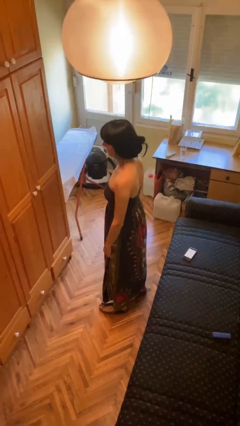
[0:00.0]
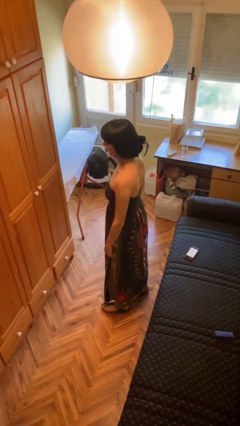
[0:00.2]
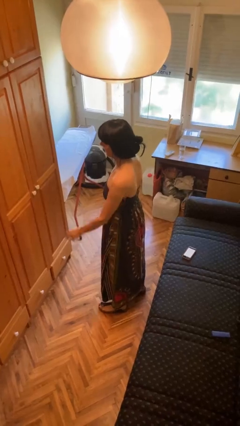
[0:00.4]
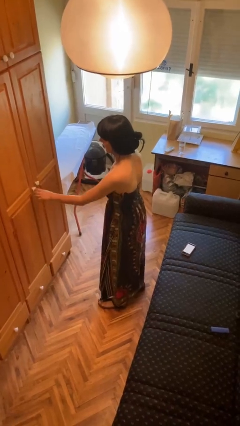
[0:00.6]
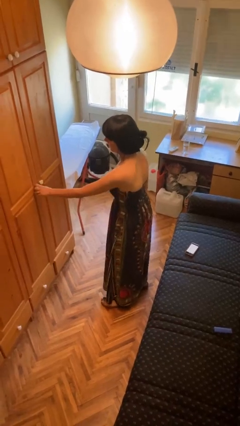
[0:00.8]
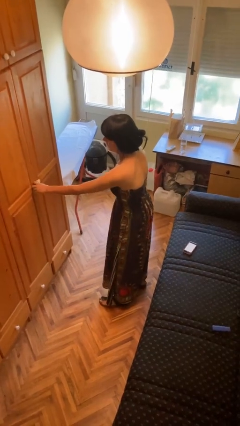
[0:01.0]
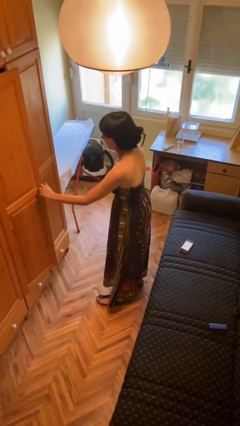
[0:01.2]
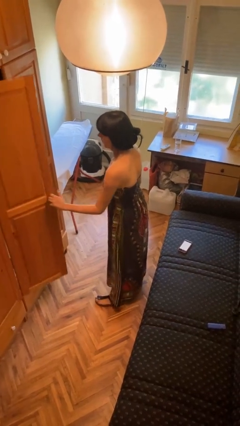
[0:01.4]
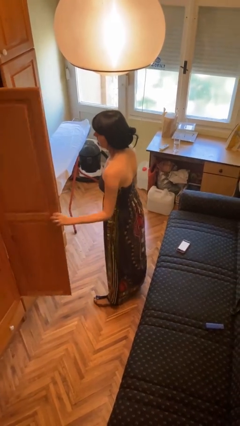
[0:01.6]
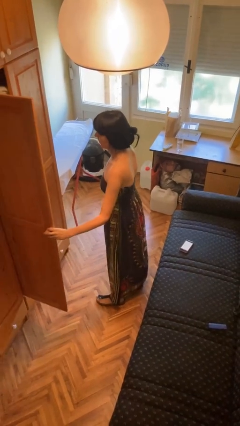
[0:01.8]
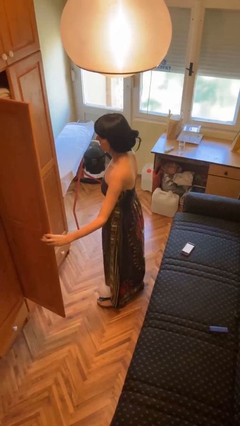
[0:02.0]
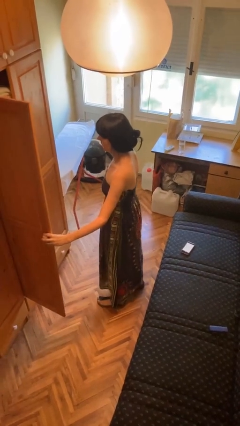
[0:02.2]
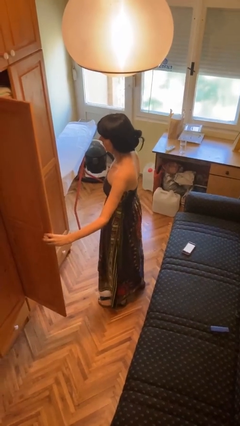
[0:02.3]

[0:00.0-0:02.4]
person opens closet door

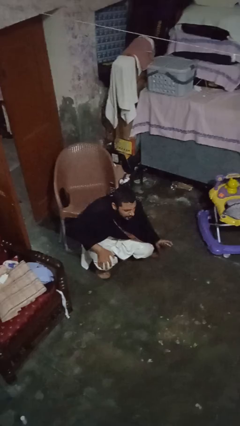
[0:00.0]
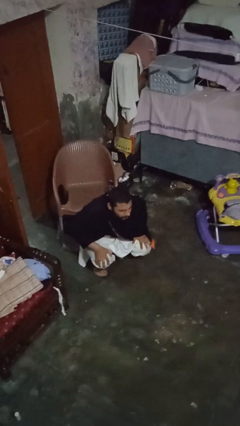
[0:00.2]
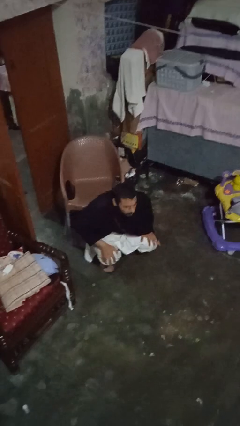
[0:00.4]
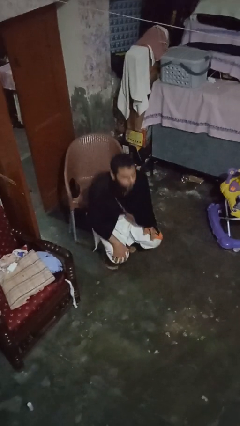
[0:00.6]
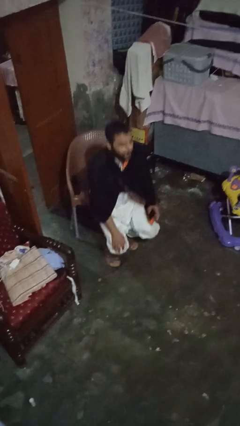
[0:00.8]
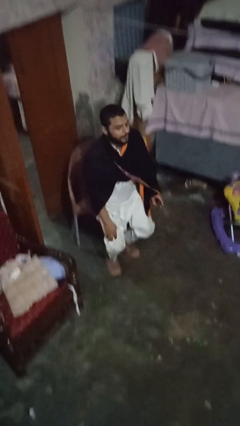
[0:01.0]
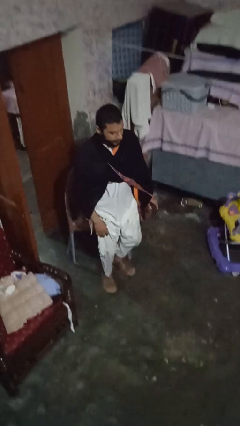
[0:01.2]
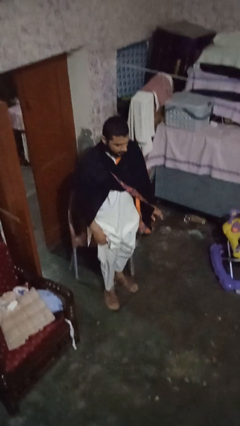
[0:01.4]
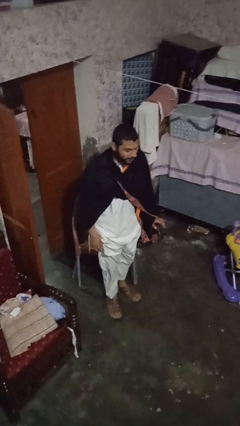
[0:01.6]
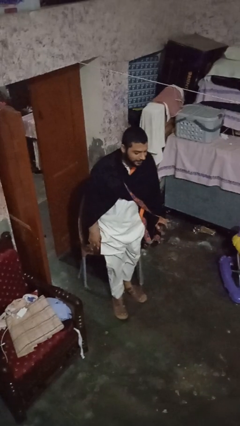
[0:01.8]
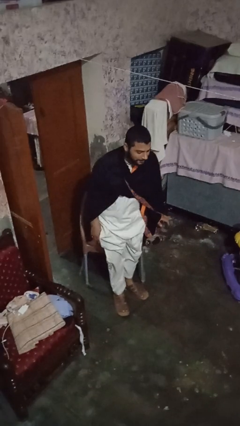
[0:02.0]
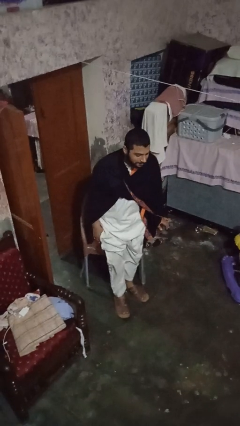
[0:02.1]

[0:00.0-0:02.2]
person stands up from floor

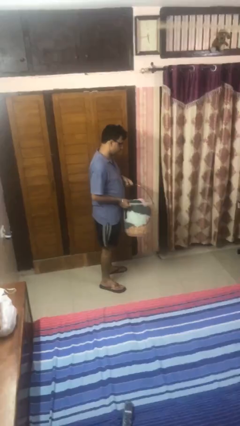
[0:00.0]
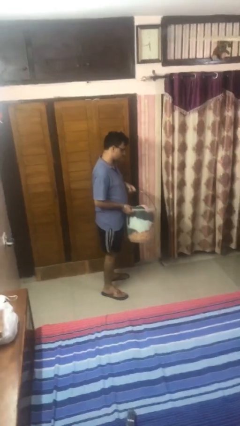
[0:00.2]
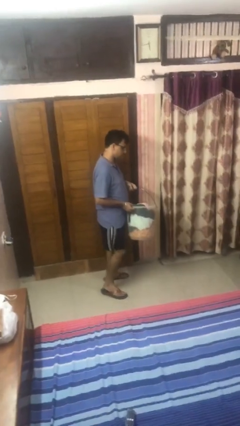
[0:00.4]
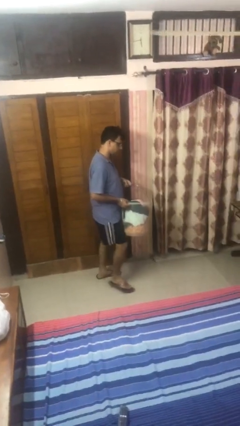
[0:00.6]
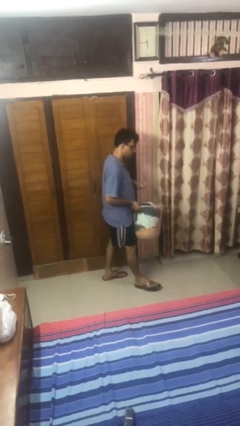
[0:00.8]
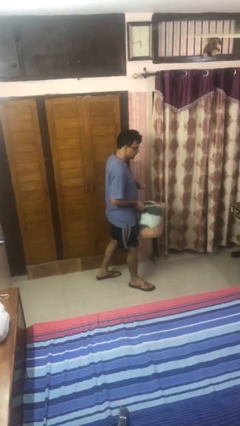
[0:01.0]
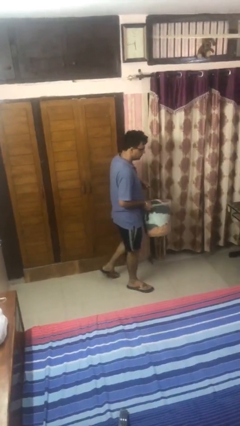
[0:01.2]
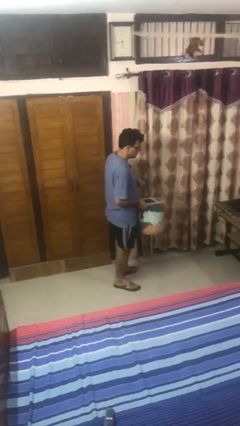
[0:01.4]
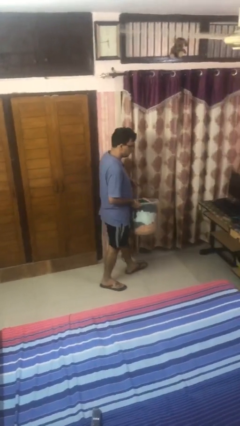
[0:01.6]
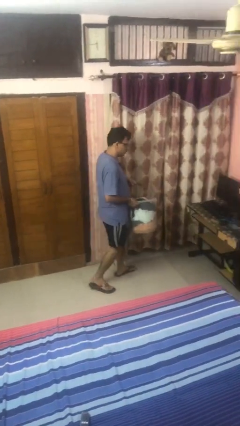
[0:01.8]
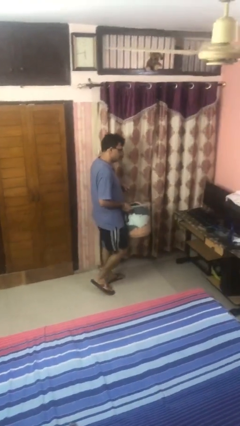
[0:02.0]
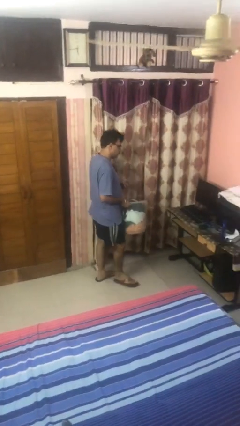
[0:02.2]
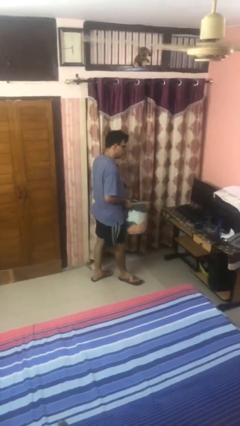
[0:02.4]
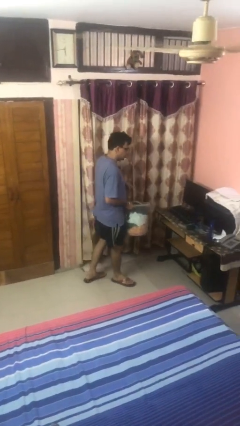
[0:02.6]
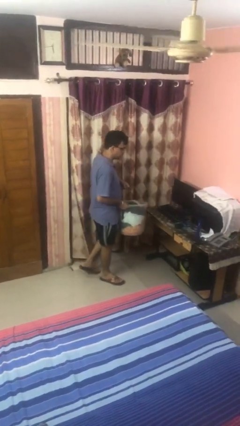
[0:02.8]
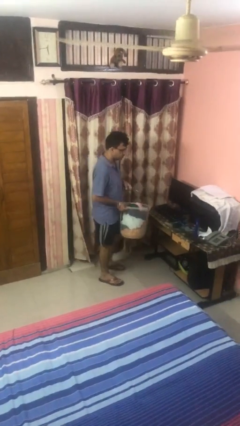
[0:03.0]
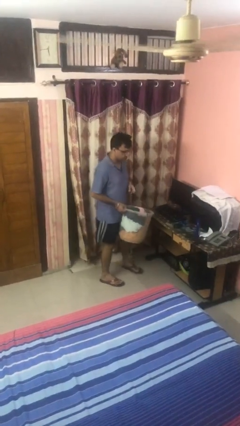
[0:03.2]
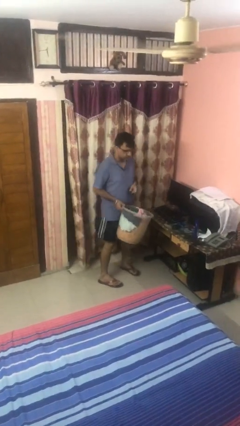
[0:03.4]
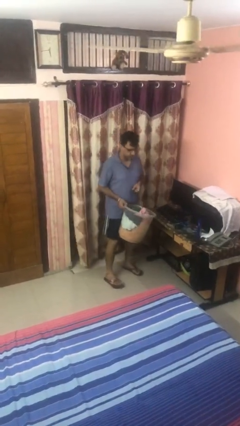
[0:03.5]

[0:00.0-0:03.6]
person carries laundry basket

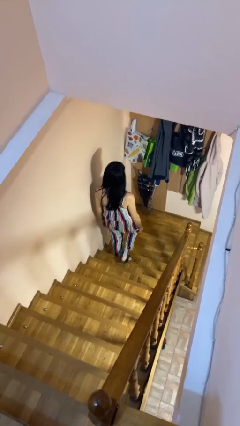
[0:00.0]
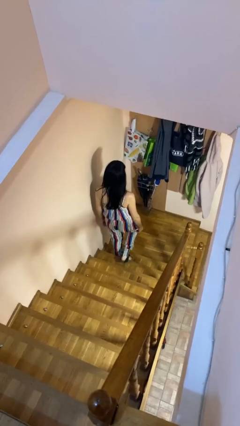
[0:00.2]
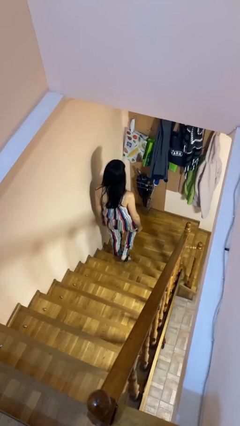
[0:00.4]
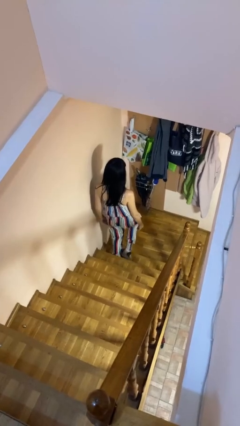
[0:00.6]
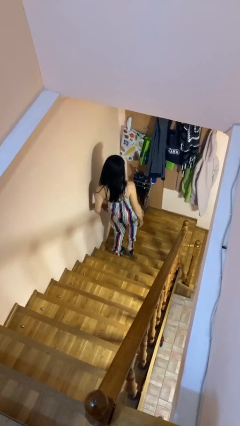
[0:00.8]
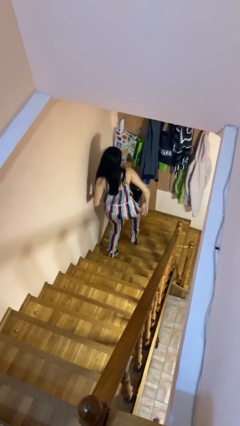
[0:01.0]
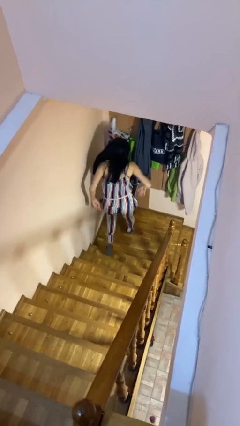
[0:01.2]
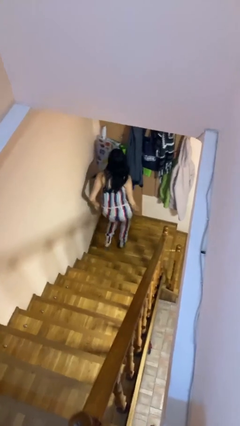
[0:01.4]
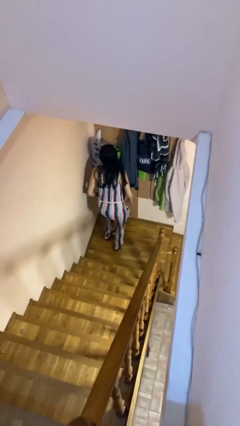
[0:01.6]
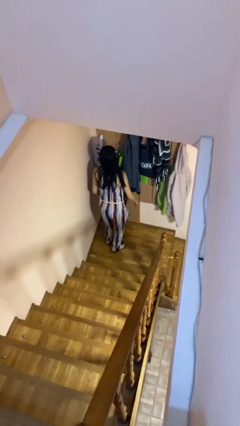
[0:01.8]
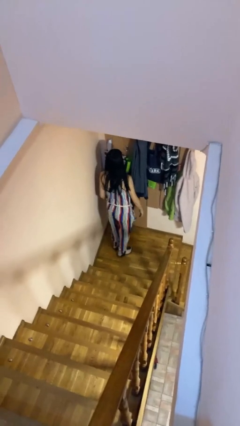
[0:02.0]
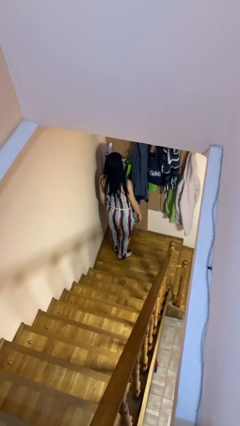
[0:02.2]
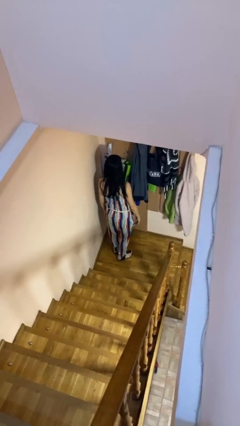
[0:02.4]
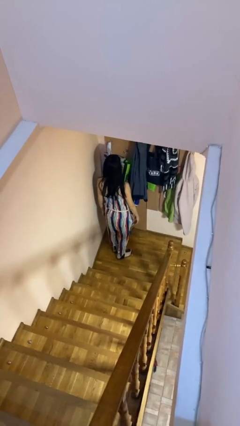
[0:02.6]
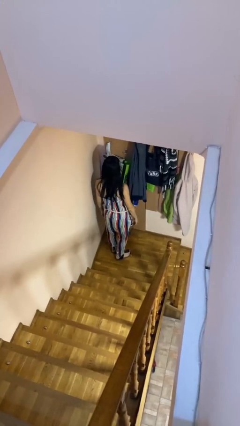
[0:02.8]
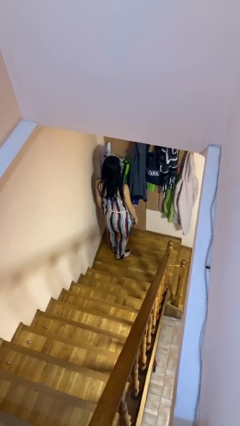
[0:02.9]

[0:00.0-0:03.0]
person trips on stair

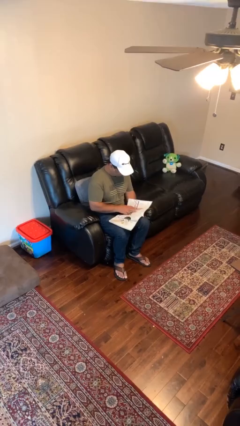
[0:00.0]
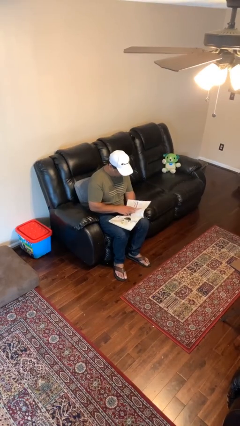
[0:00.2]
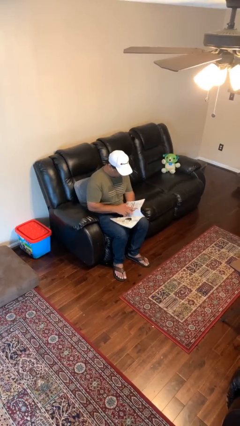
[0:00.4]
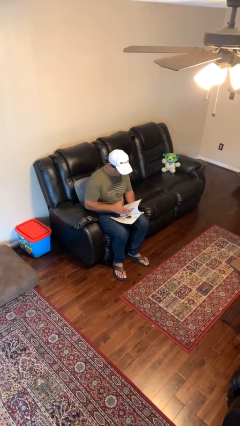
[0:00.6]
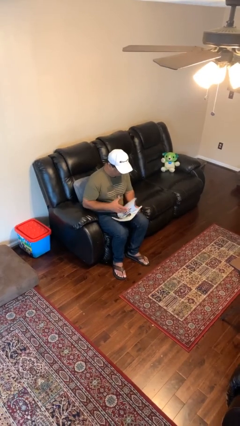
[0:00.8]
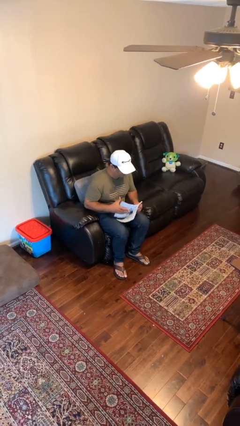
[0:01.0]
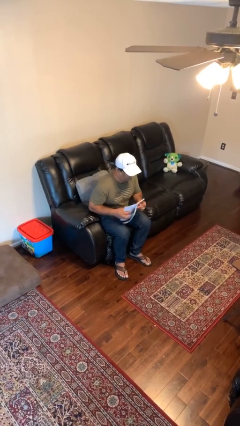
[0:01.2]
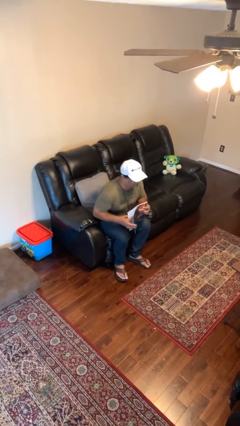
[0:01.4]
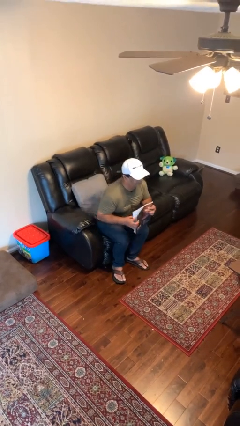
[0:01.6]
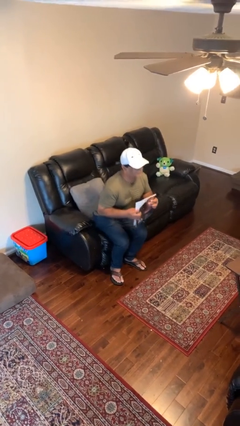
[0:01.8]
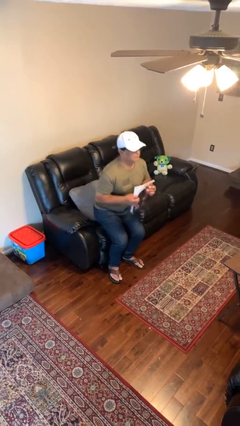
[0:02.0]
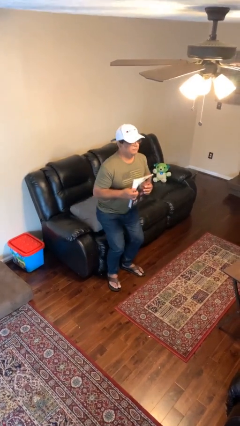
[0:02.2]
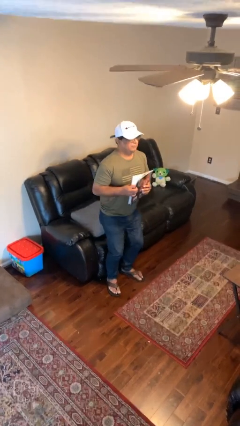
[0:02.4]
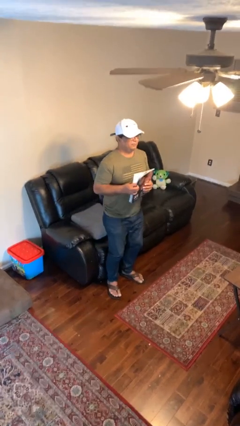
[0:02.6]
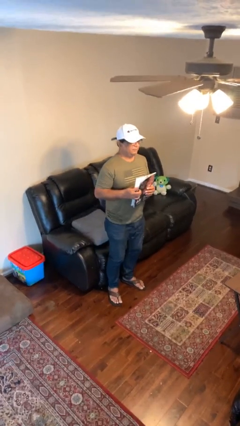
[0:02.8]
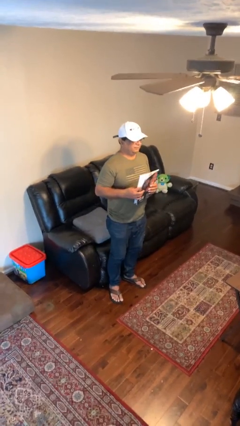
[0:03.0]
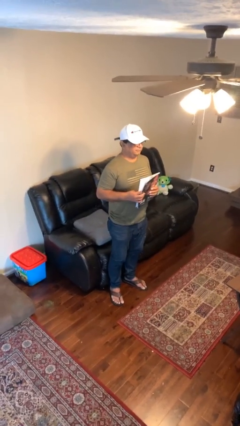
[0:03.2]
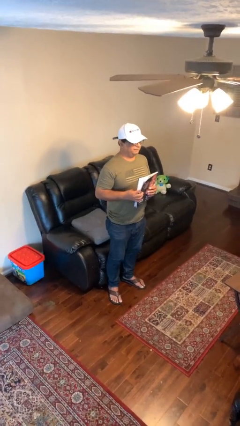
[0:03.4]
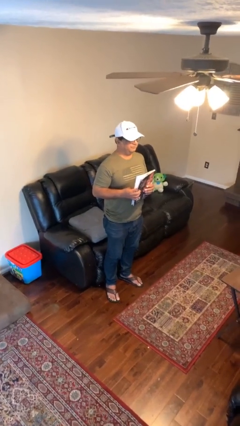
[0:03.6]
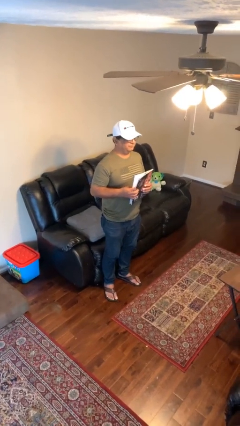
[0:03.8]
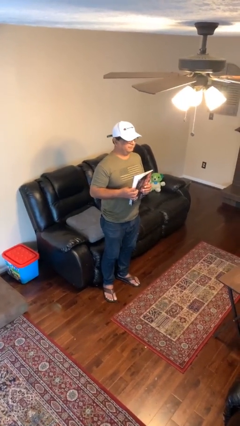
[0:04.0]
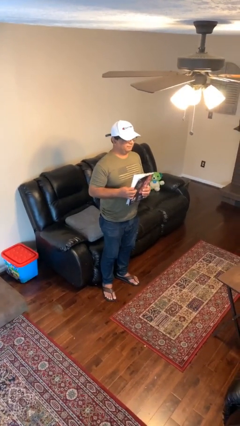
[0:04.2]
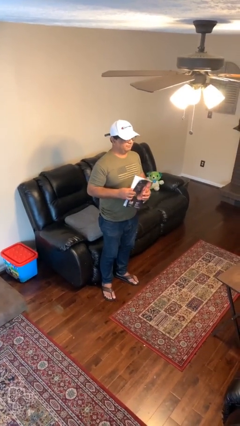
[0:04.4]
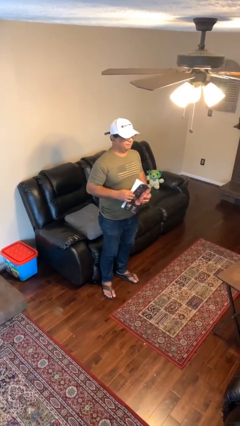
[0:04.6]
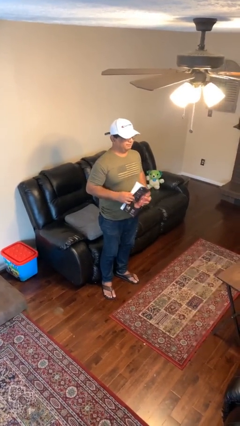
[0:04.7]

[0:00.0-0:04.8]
person stands up

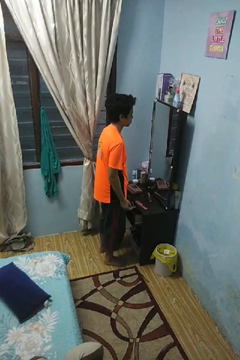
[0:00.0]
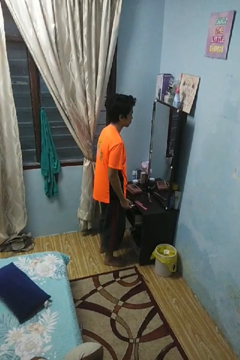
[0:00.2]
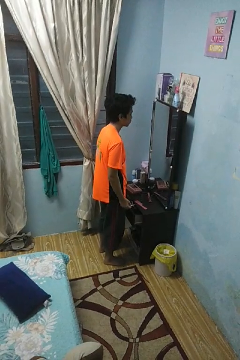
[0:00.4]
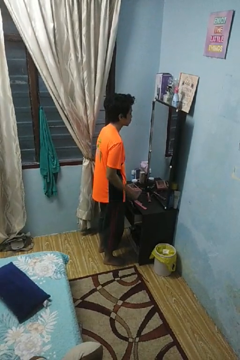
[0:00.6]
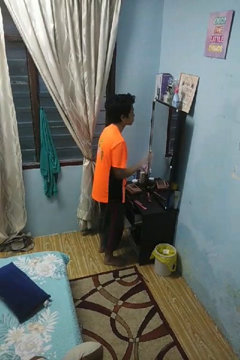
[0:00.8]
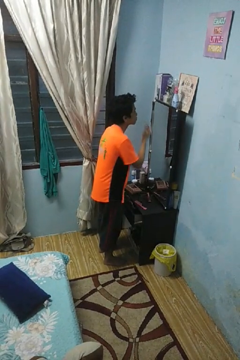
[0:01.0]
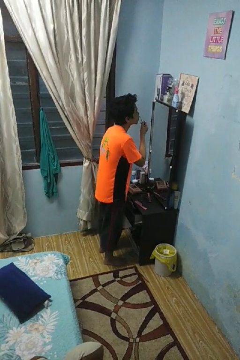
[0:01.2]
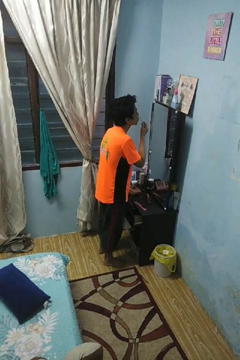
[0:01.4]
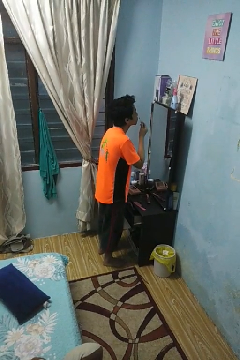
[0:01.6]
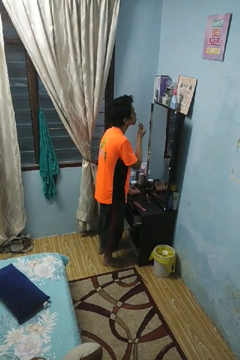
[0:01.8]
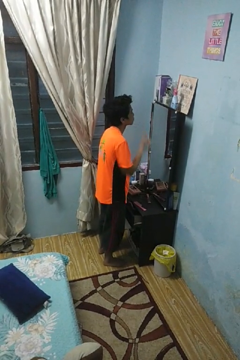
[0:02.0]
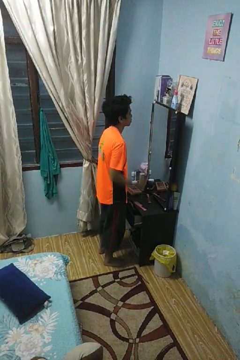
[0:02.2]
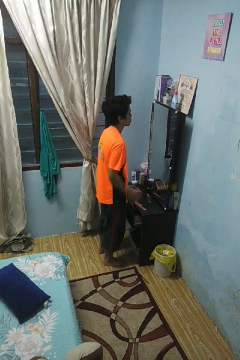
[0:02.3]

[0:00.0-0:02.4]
person applies lip makeup
